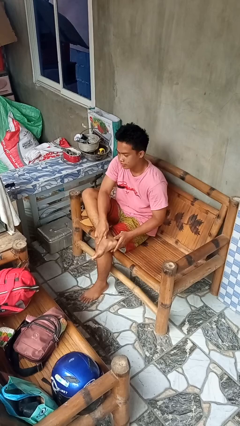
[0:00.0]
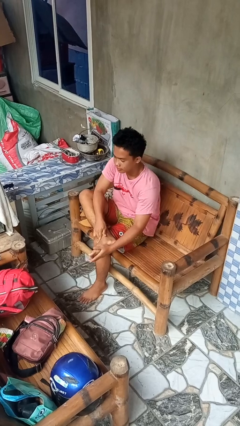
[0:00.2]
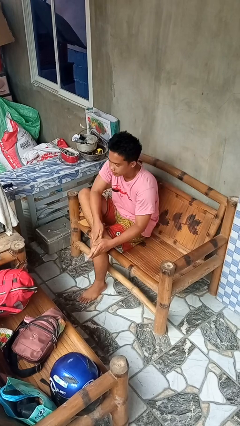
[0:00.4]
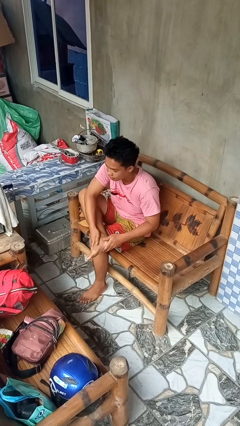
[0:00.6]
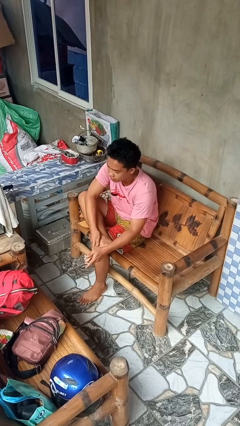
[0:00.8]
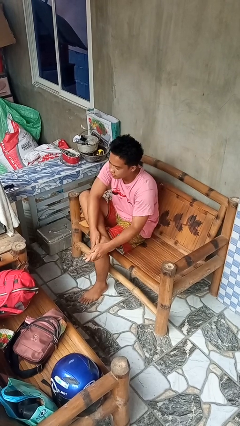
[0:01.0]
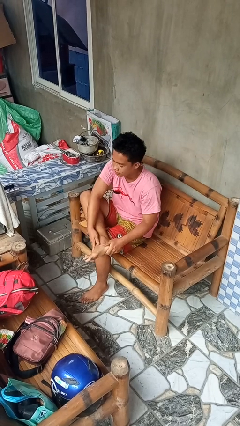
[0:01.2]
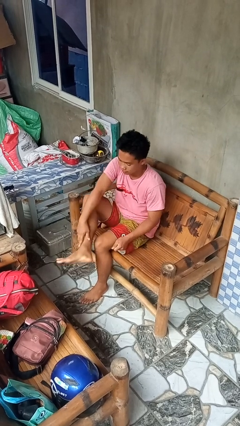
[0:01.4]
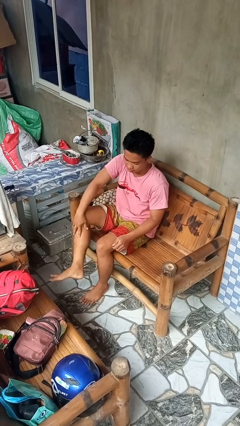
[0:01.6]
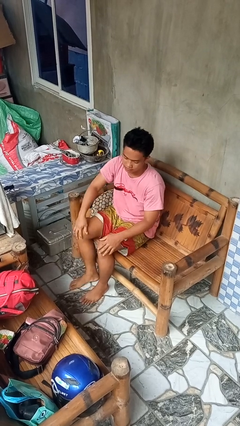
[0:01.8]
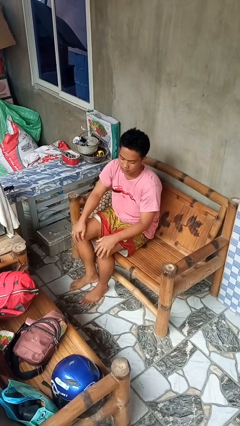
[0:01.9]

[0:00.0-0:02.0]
person rubs foot

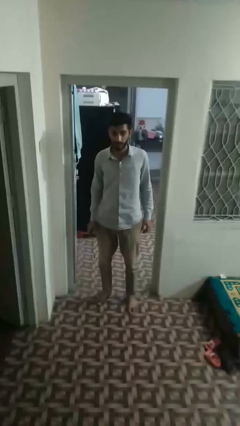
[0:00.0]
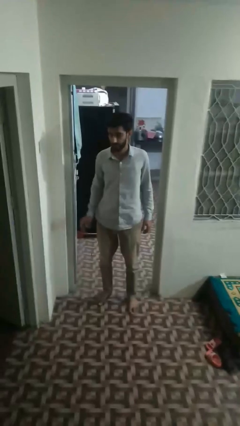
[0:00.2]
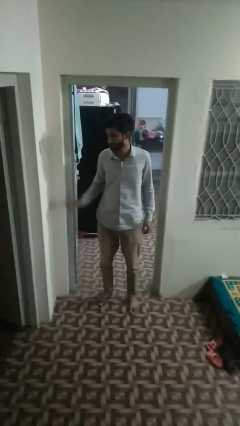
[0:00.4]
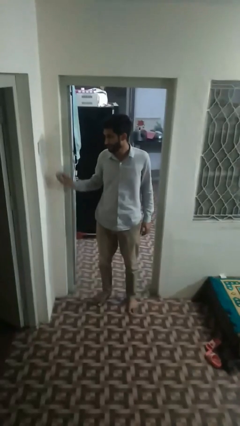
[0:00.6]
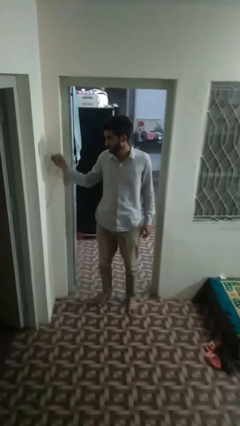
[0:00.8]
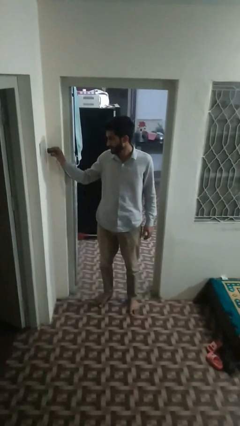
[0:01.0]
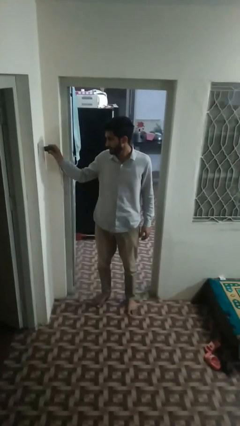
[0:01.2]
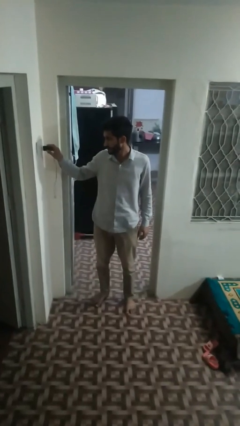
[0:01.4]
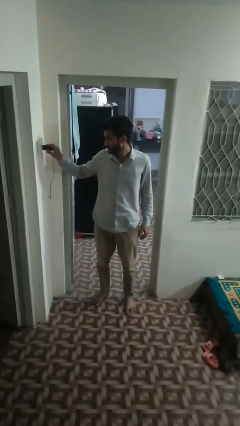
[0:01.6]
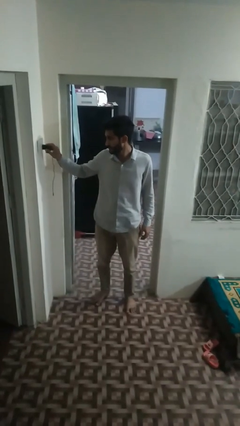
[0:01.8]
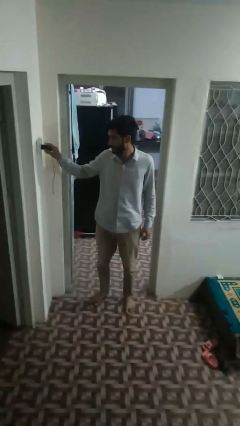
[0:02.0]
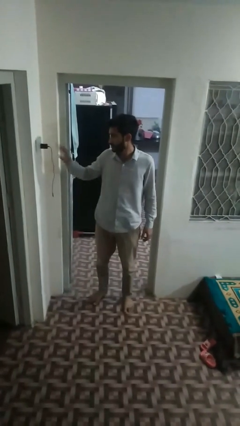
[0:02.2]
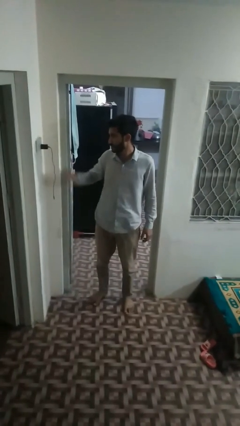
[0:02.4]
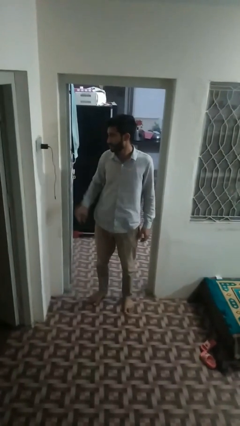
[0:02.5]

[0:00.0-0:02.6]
person plugs into electrical socket

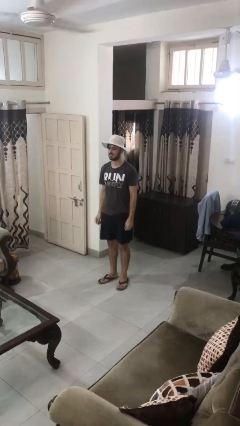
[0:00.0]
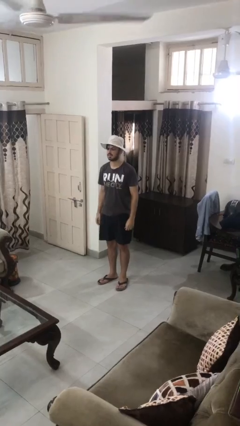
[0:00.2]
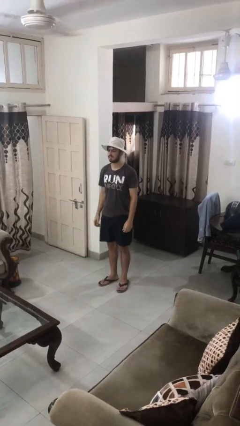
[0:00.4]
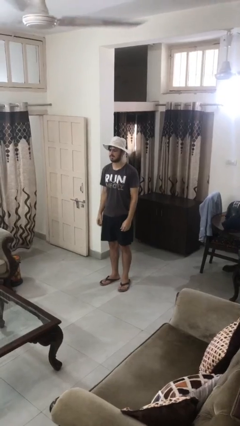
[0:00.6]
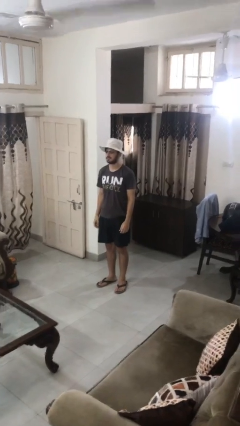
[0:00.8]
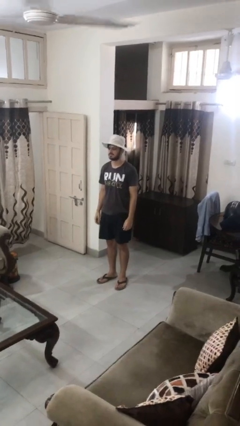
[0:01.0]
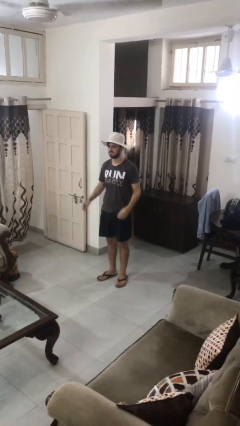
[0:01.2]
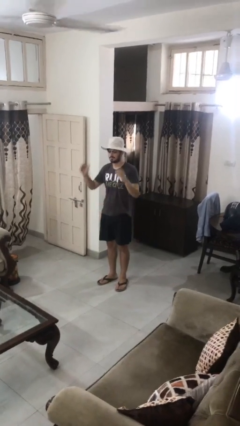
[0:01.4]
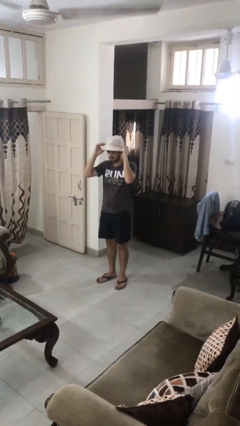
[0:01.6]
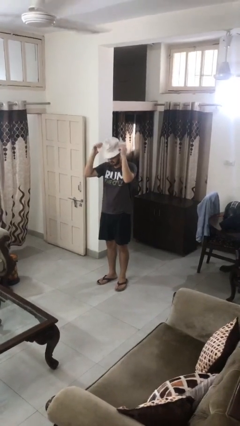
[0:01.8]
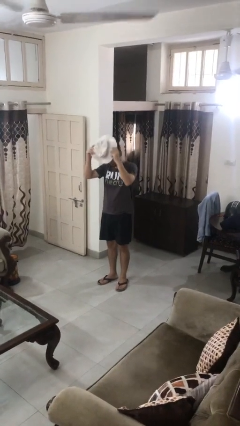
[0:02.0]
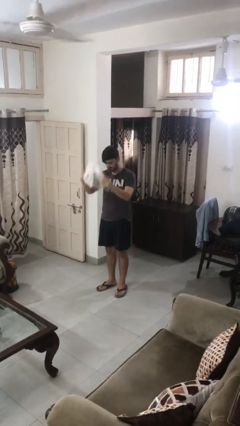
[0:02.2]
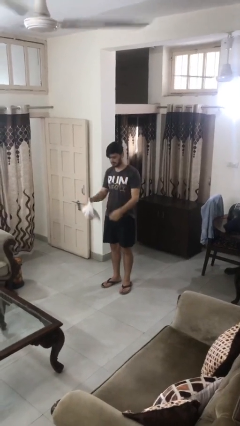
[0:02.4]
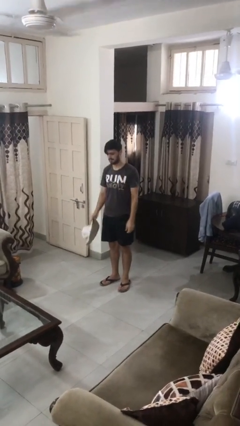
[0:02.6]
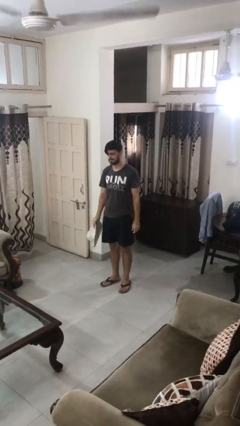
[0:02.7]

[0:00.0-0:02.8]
person takes off hat

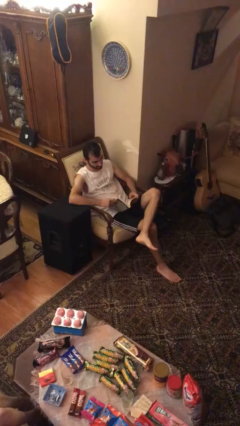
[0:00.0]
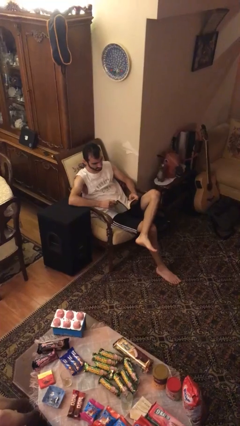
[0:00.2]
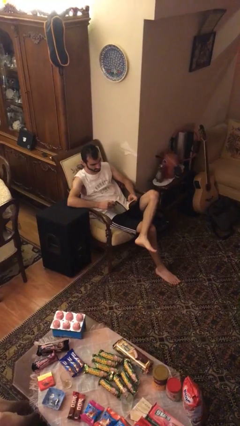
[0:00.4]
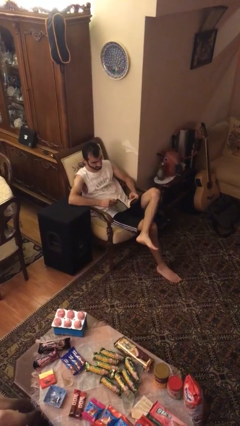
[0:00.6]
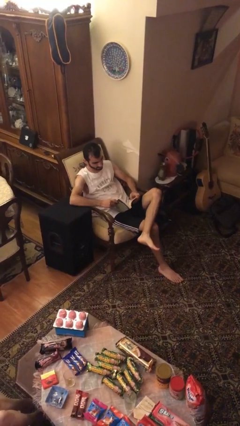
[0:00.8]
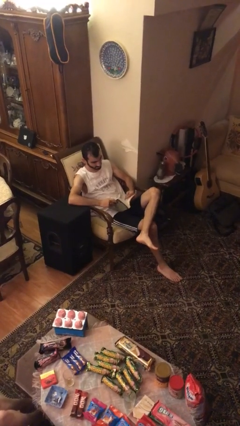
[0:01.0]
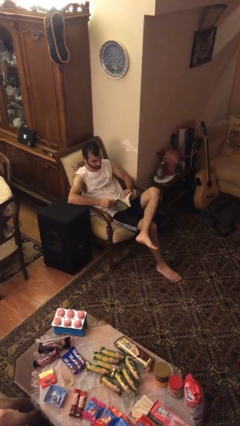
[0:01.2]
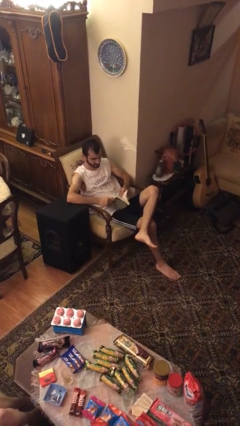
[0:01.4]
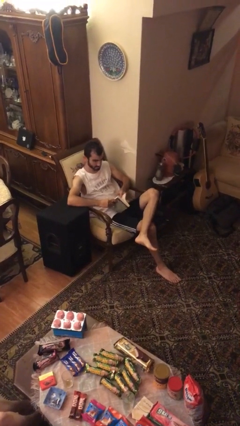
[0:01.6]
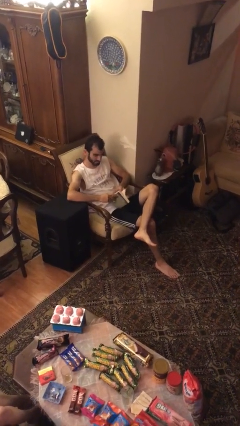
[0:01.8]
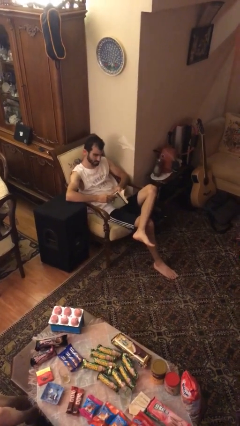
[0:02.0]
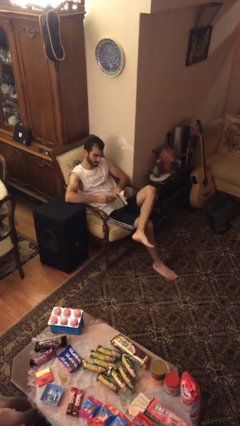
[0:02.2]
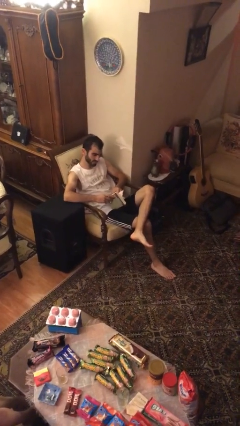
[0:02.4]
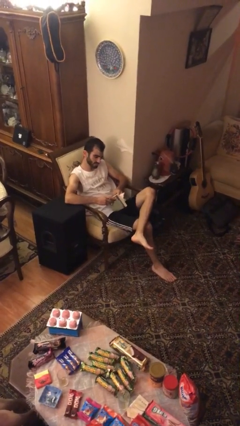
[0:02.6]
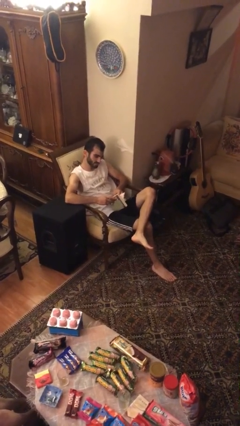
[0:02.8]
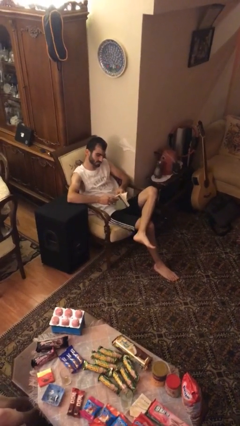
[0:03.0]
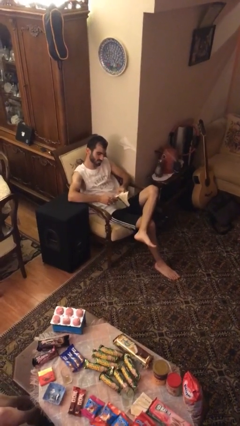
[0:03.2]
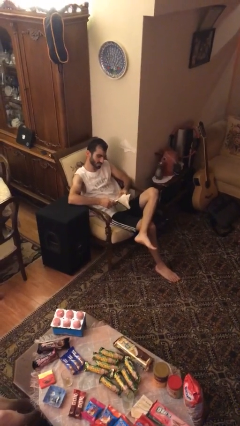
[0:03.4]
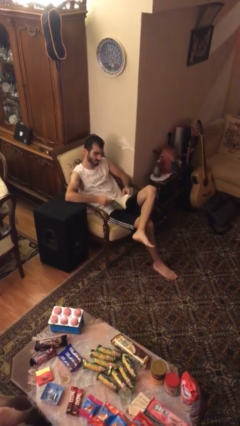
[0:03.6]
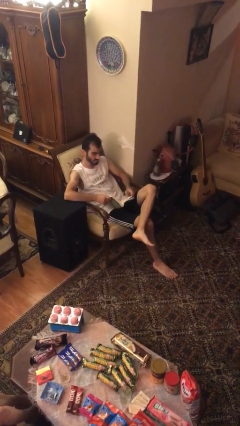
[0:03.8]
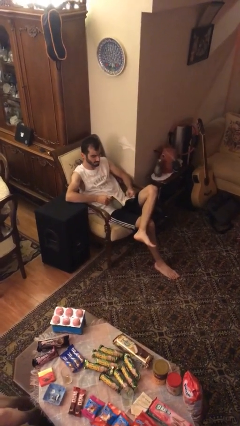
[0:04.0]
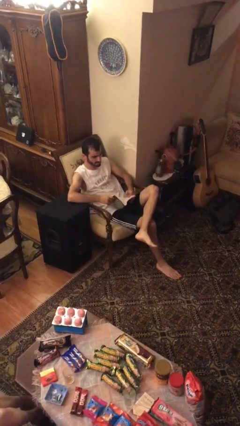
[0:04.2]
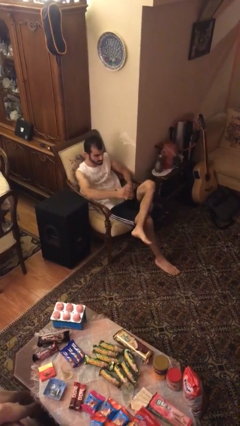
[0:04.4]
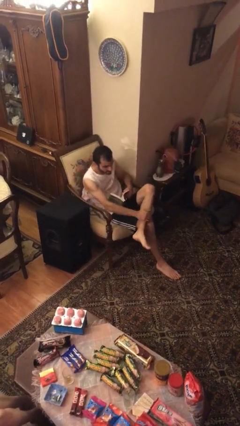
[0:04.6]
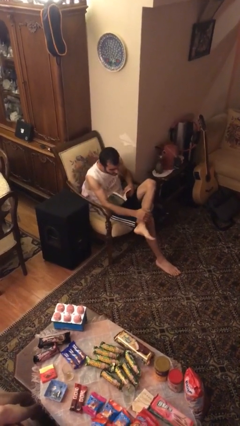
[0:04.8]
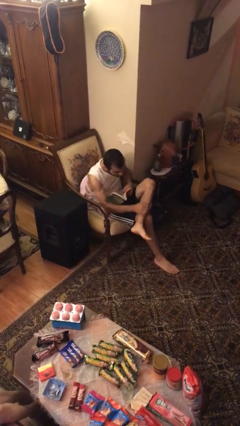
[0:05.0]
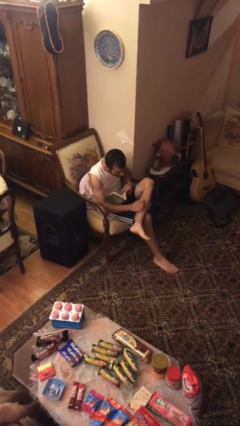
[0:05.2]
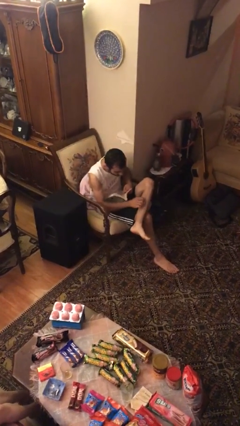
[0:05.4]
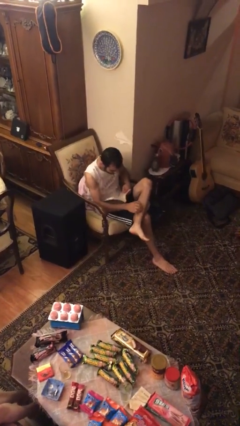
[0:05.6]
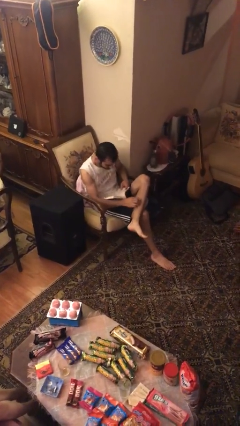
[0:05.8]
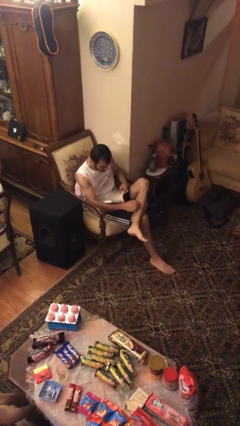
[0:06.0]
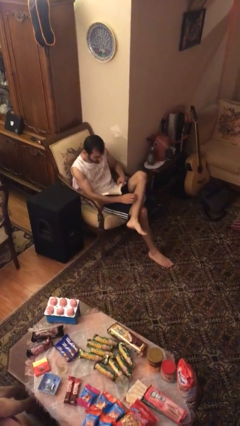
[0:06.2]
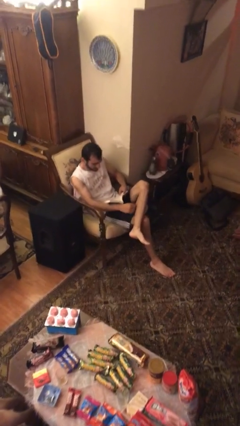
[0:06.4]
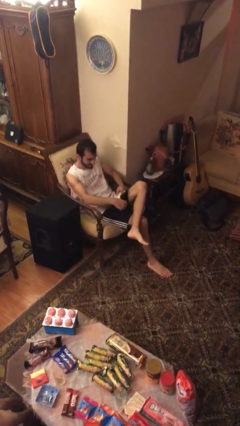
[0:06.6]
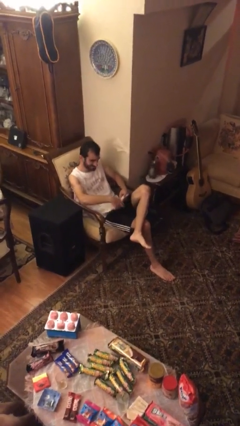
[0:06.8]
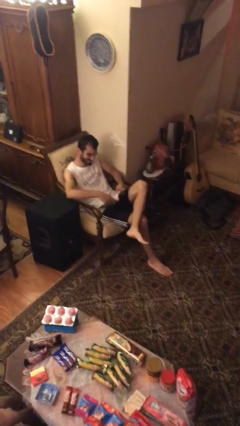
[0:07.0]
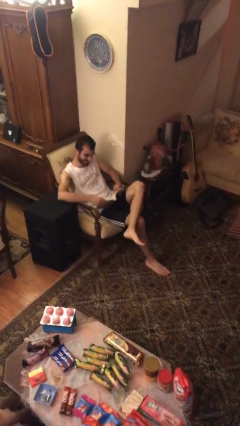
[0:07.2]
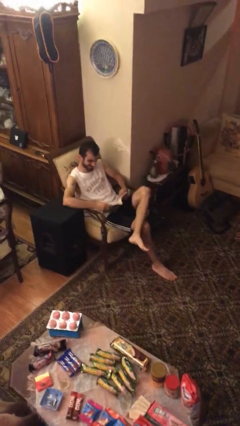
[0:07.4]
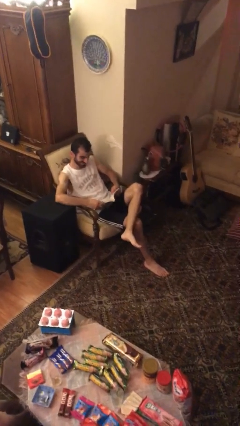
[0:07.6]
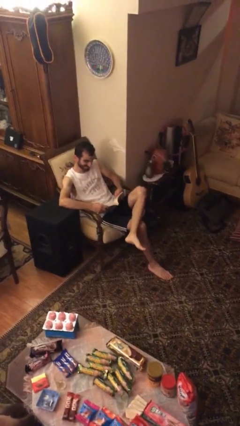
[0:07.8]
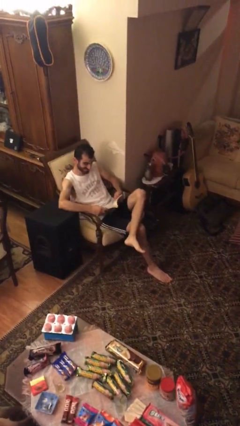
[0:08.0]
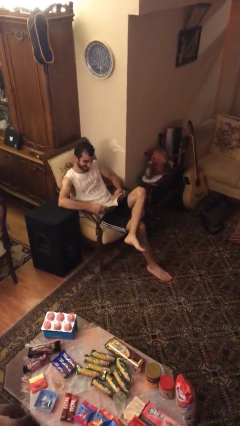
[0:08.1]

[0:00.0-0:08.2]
person reads document

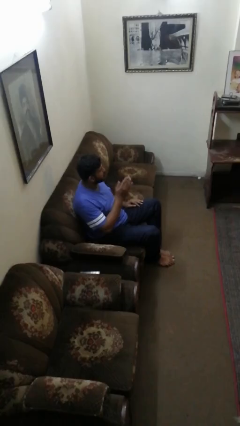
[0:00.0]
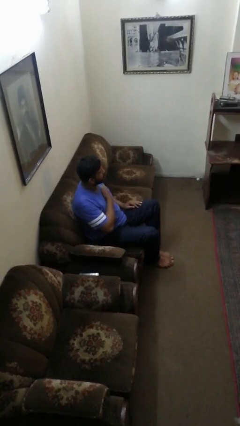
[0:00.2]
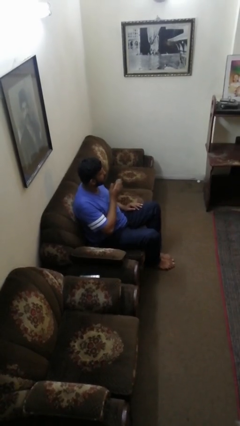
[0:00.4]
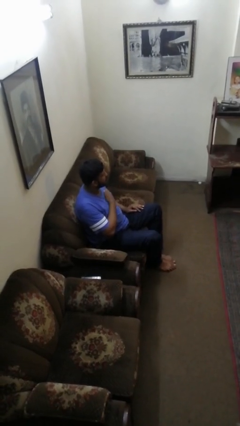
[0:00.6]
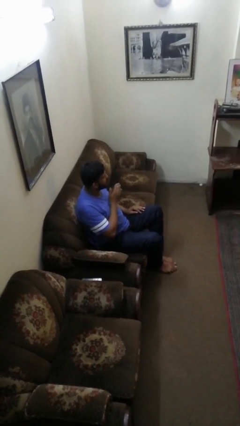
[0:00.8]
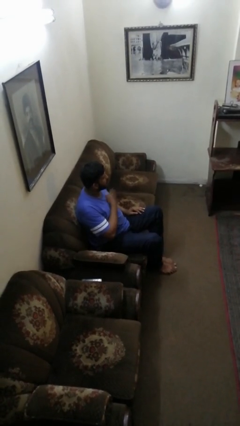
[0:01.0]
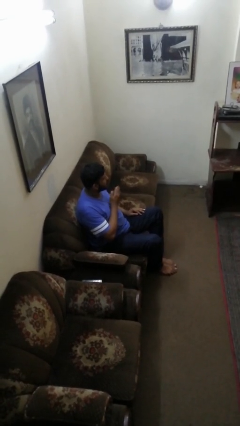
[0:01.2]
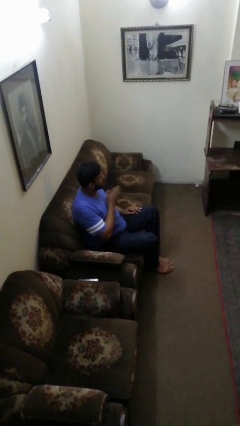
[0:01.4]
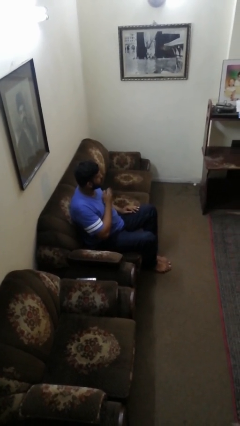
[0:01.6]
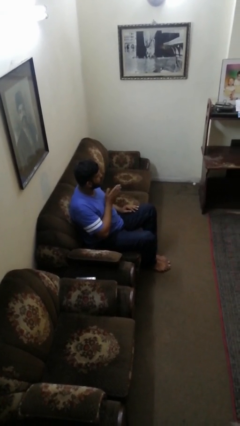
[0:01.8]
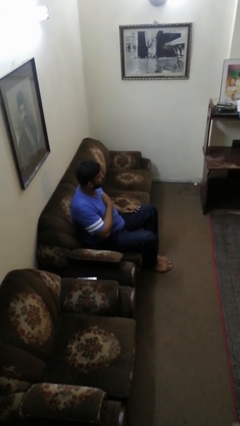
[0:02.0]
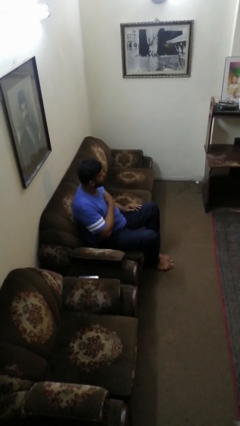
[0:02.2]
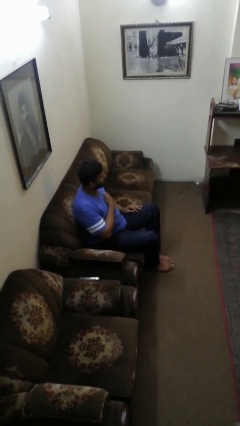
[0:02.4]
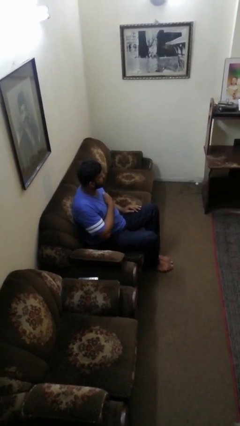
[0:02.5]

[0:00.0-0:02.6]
person drums on chest
